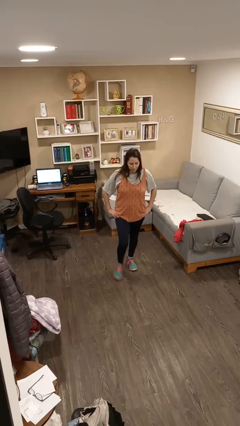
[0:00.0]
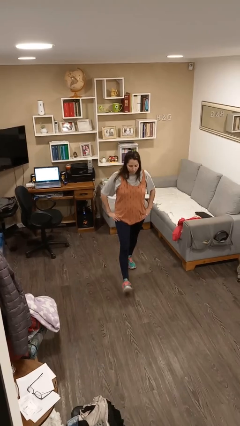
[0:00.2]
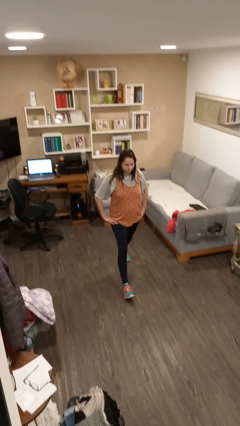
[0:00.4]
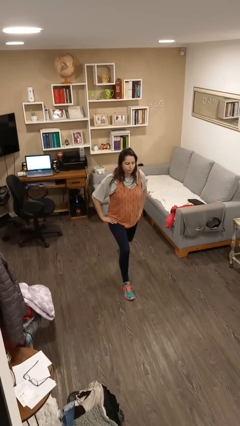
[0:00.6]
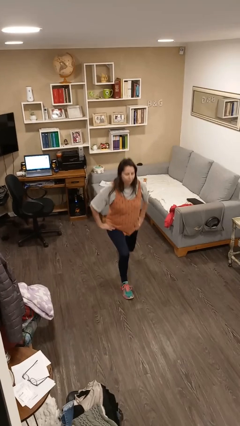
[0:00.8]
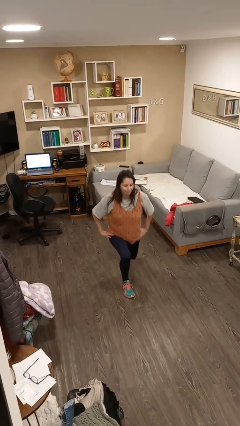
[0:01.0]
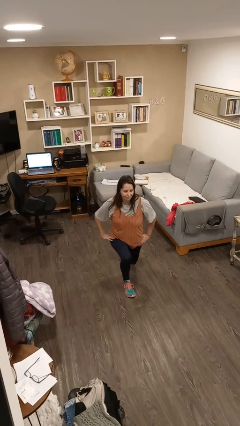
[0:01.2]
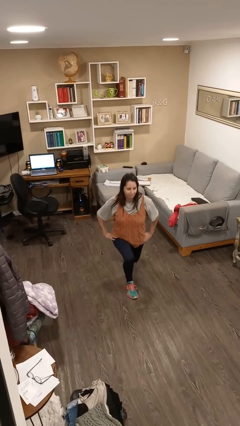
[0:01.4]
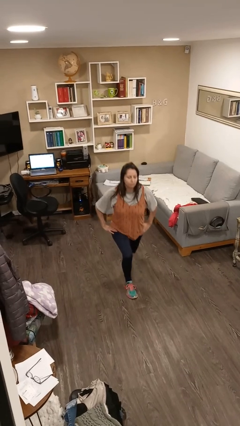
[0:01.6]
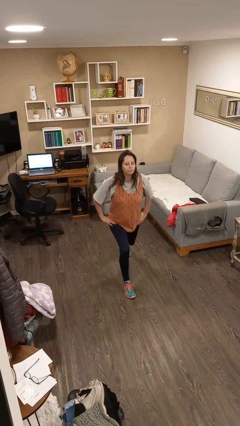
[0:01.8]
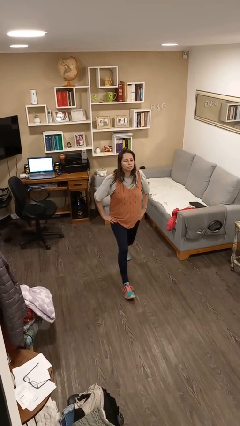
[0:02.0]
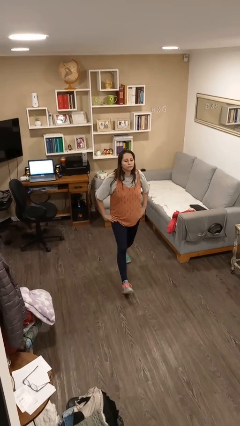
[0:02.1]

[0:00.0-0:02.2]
person exercises with lunges

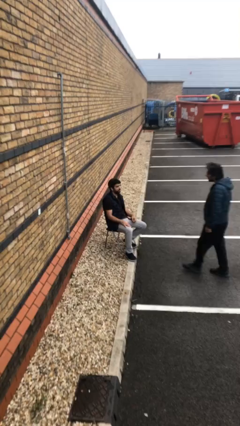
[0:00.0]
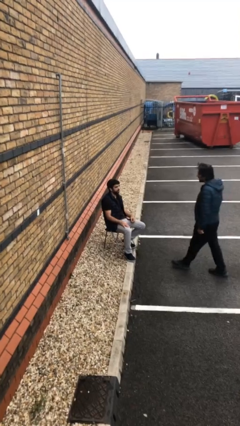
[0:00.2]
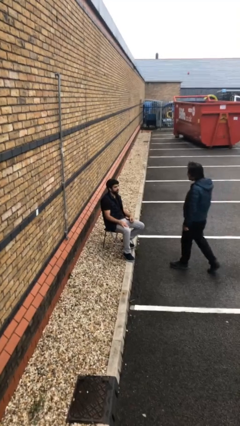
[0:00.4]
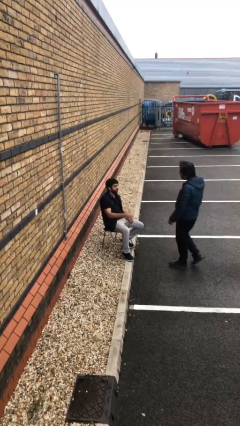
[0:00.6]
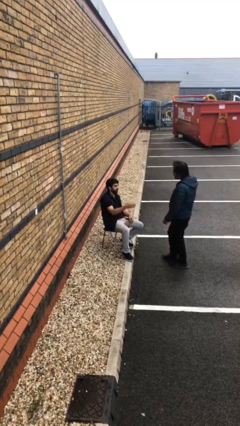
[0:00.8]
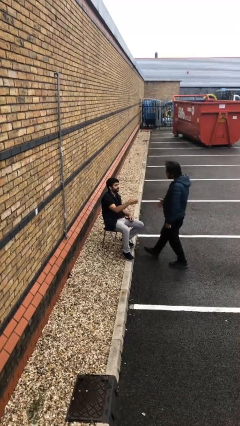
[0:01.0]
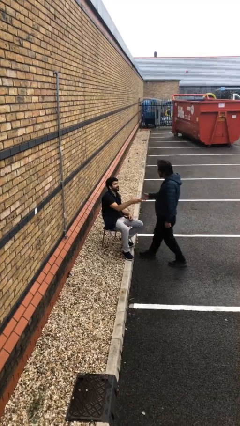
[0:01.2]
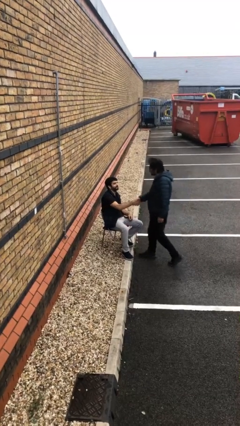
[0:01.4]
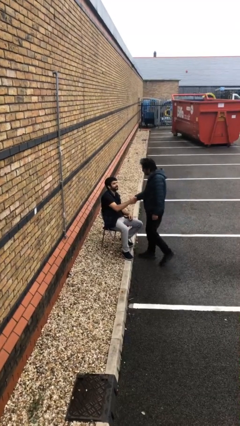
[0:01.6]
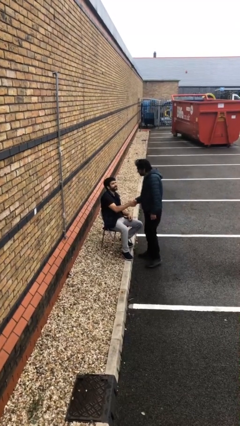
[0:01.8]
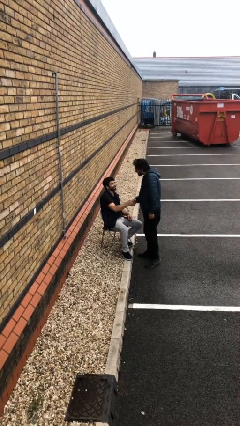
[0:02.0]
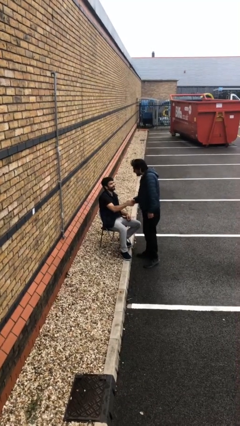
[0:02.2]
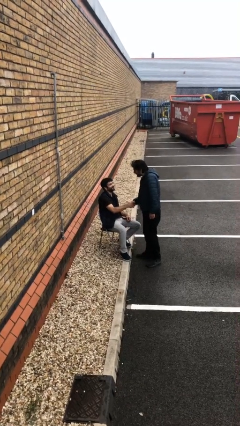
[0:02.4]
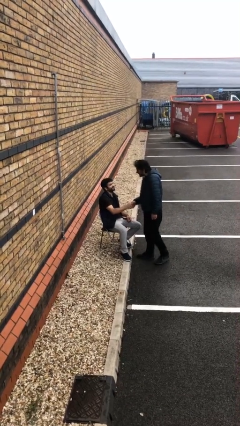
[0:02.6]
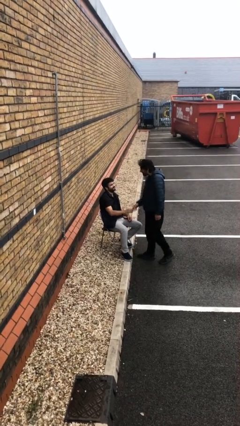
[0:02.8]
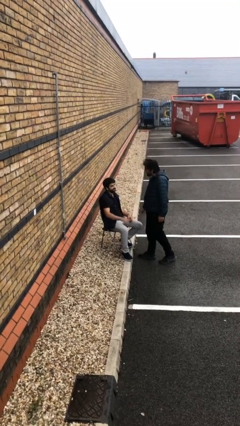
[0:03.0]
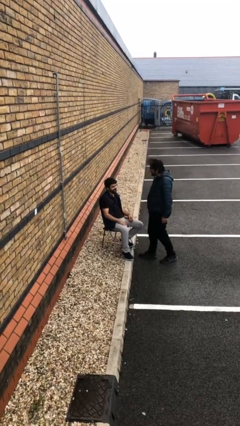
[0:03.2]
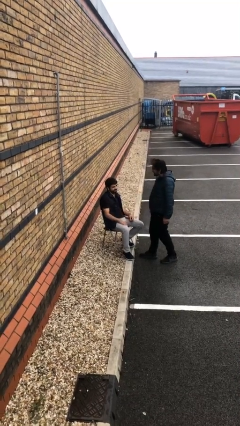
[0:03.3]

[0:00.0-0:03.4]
person shakes hand

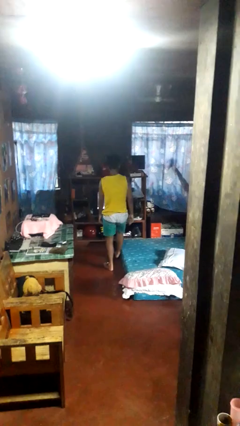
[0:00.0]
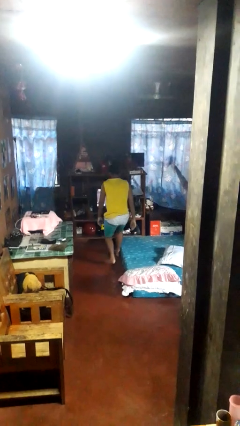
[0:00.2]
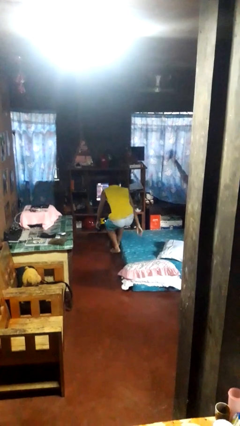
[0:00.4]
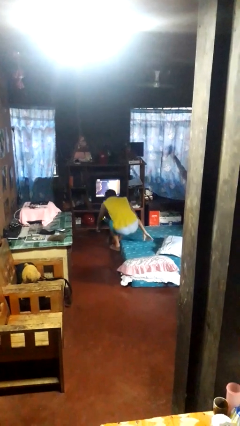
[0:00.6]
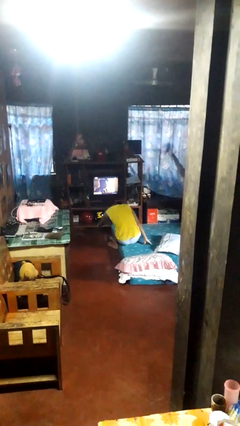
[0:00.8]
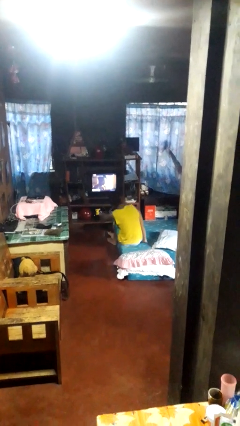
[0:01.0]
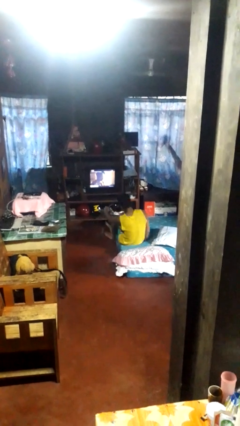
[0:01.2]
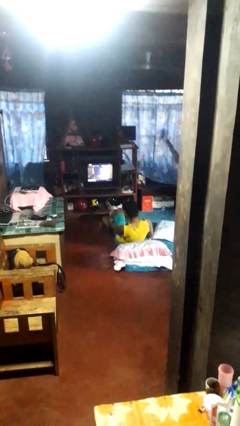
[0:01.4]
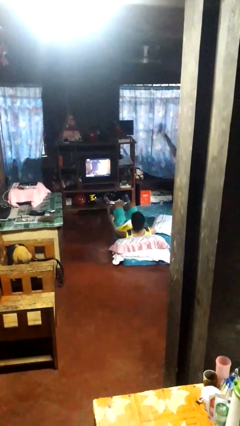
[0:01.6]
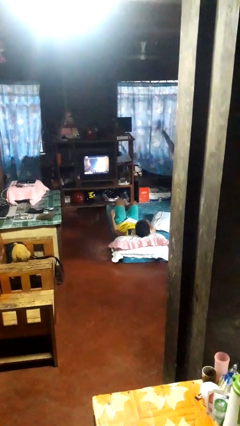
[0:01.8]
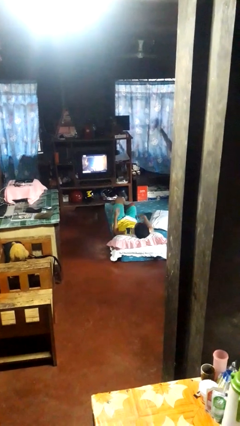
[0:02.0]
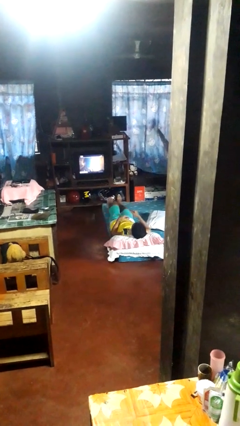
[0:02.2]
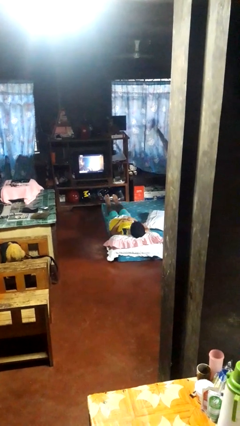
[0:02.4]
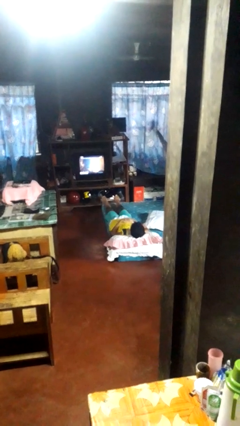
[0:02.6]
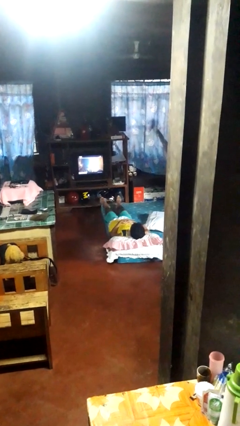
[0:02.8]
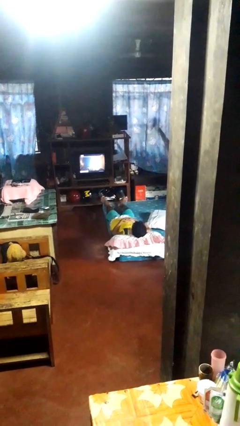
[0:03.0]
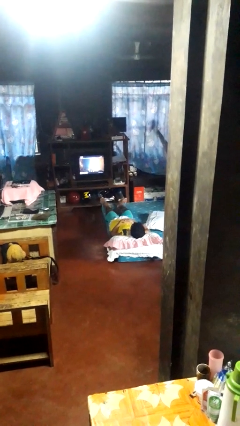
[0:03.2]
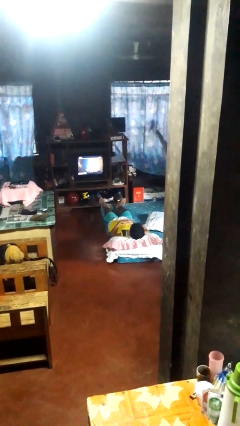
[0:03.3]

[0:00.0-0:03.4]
person lies down on bed

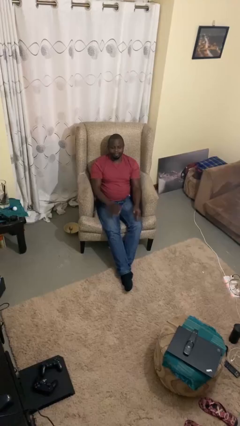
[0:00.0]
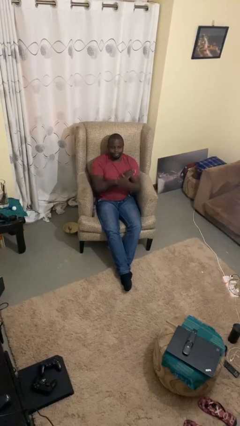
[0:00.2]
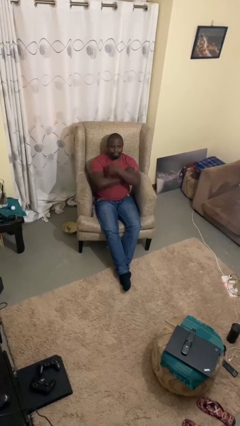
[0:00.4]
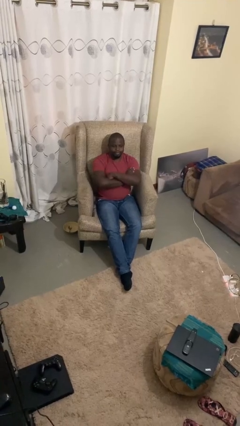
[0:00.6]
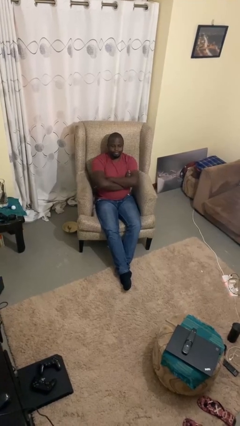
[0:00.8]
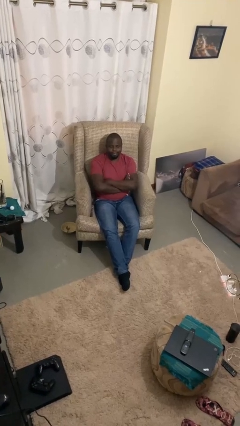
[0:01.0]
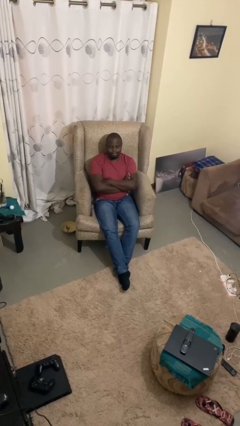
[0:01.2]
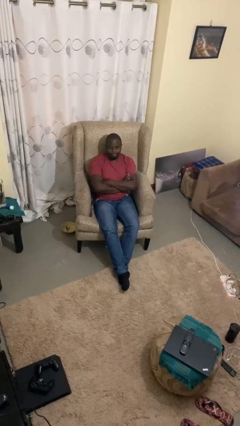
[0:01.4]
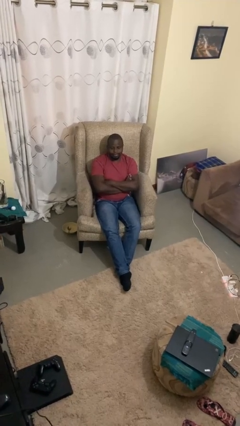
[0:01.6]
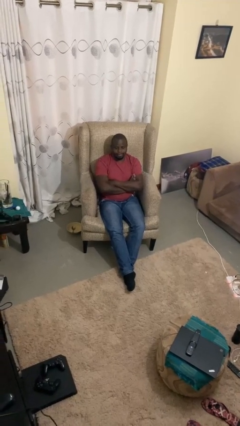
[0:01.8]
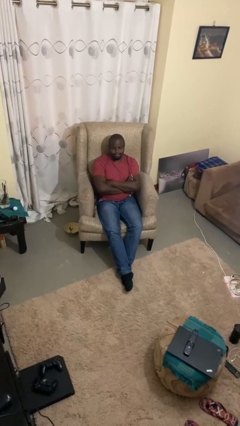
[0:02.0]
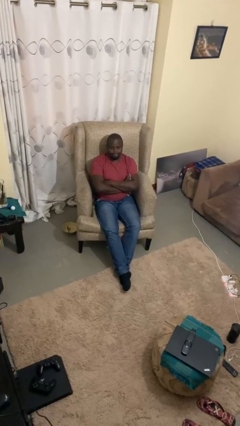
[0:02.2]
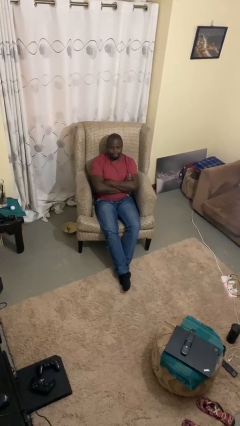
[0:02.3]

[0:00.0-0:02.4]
person crosses arms

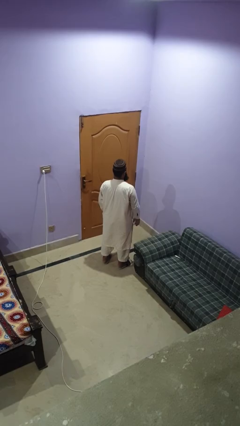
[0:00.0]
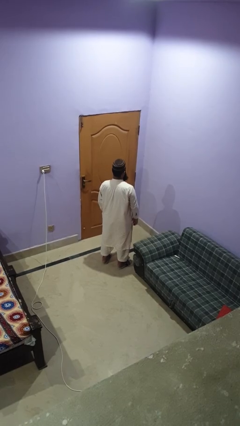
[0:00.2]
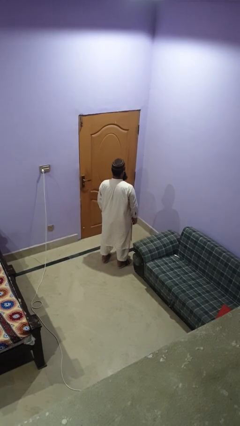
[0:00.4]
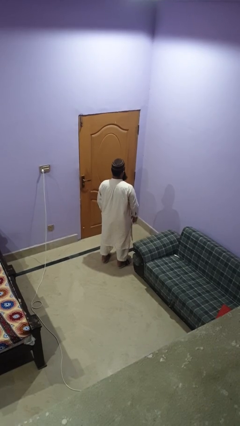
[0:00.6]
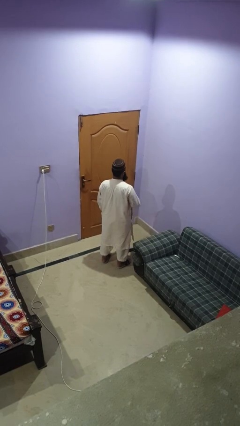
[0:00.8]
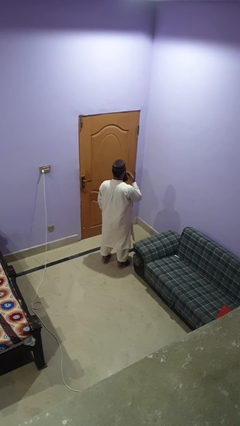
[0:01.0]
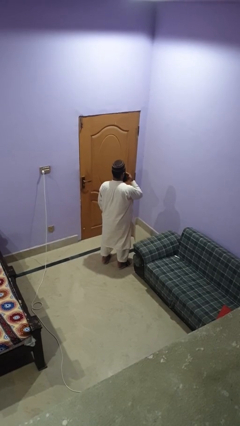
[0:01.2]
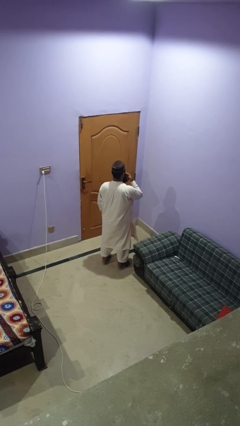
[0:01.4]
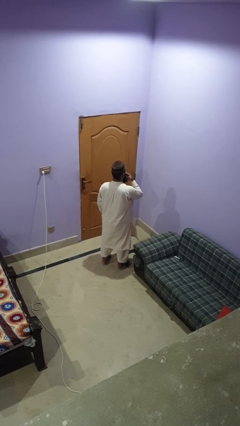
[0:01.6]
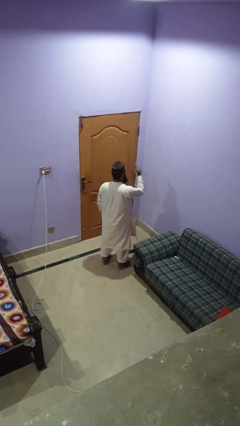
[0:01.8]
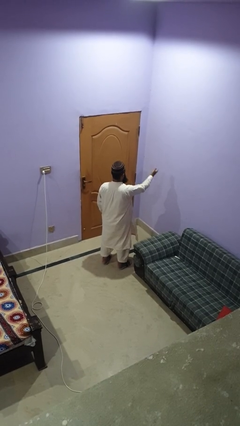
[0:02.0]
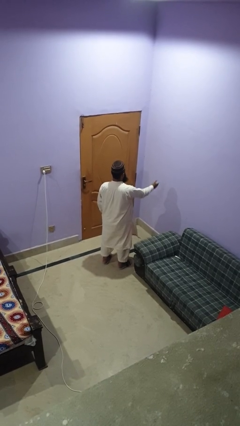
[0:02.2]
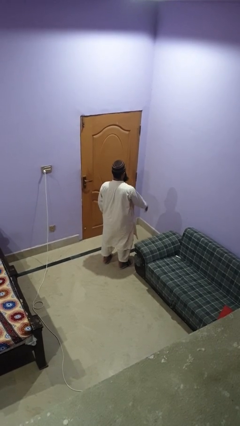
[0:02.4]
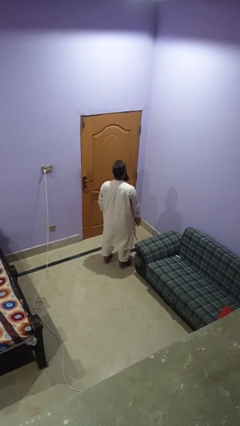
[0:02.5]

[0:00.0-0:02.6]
person gestures blow kiss

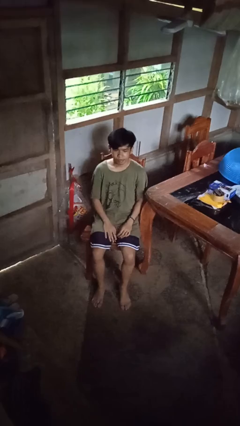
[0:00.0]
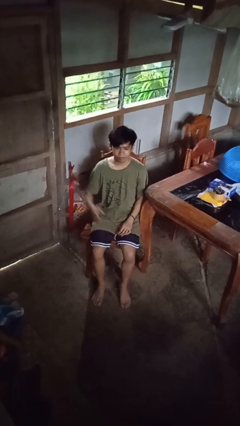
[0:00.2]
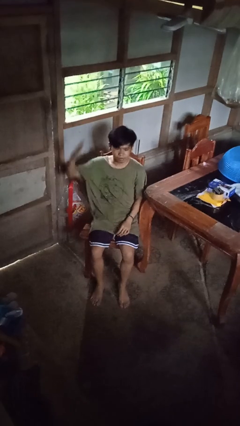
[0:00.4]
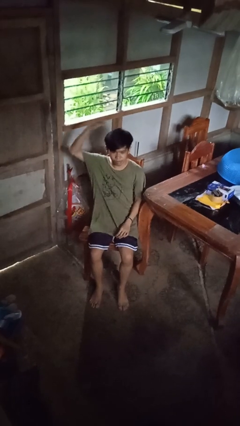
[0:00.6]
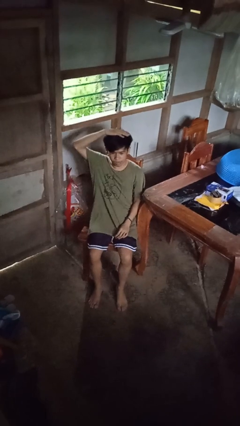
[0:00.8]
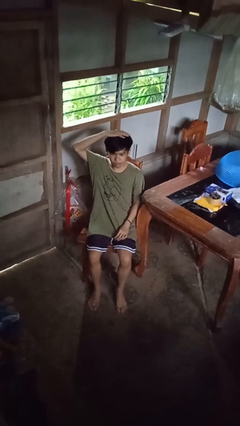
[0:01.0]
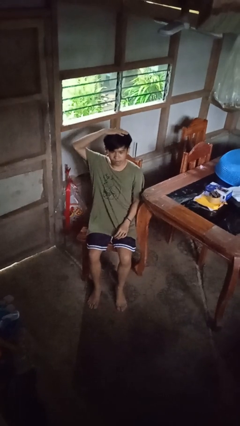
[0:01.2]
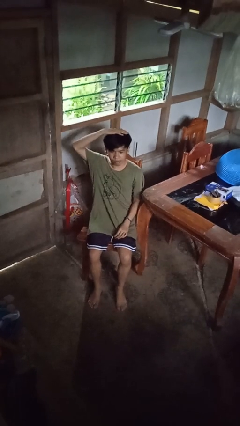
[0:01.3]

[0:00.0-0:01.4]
person pats head

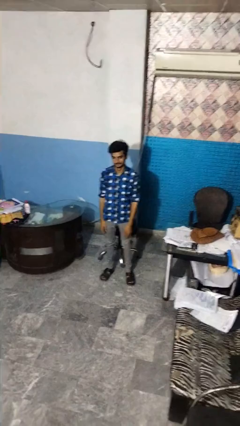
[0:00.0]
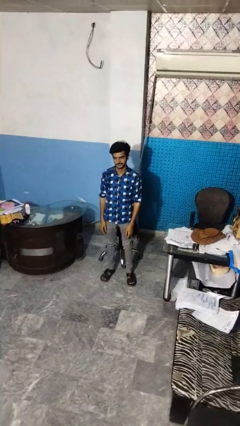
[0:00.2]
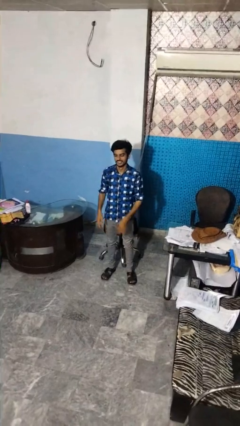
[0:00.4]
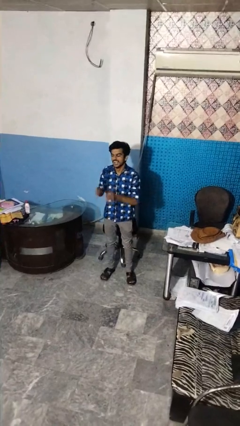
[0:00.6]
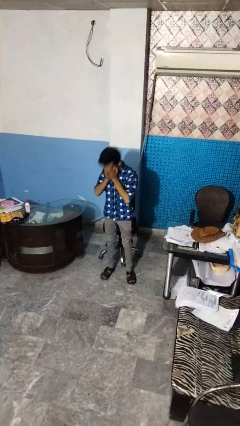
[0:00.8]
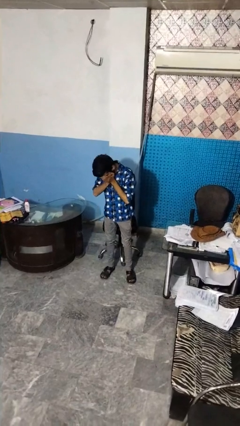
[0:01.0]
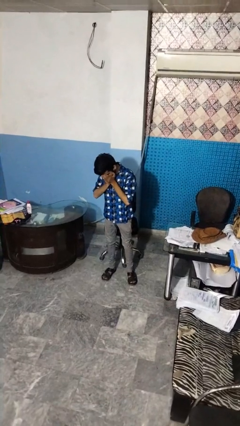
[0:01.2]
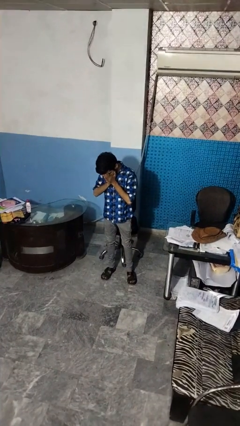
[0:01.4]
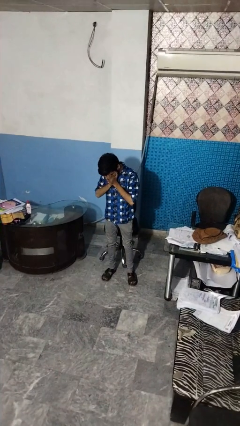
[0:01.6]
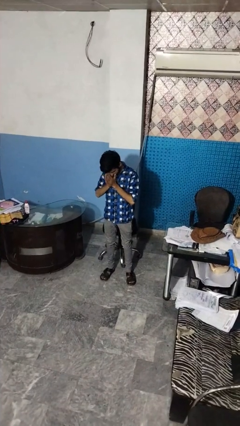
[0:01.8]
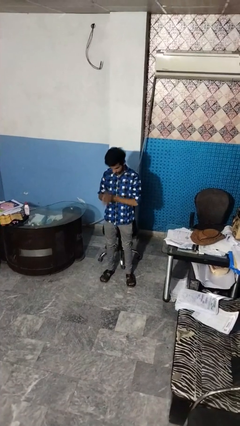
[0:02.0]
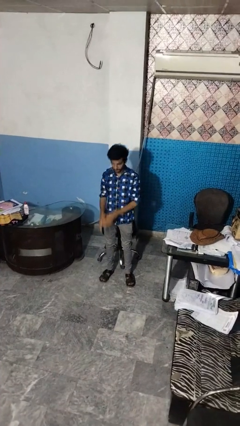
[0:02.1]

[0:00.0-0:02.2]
person sneezes into hand
